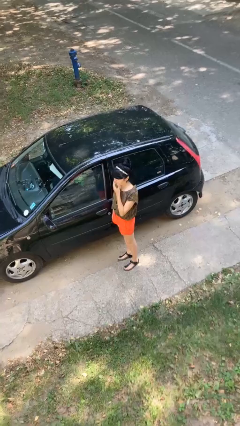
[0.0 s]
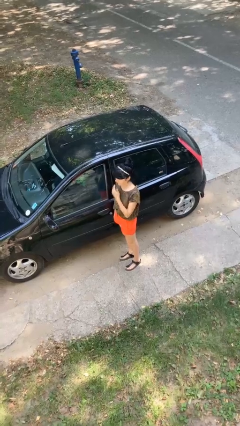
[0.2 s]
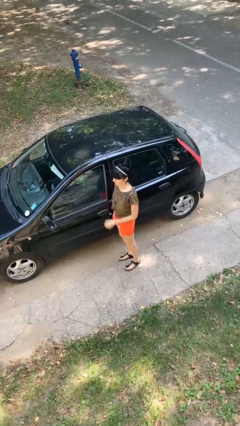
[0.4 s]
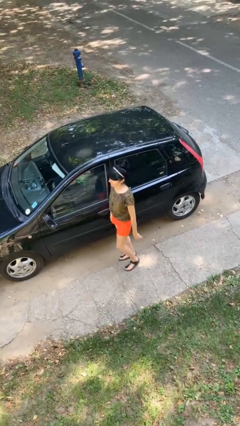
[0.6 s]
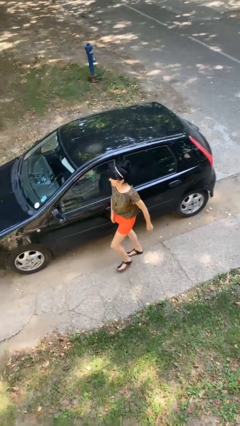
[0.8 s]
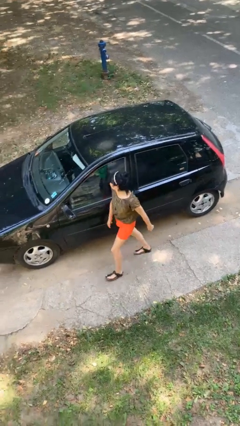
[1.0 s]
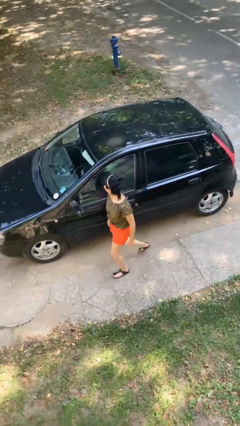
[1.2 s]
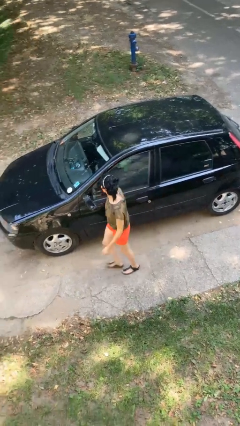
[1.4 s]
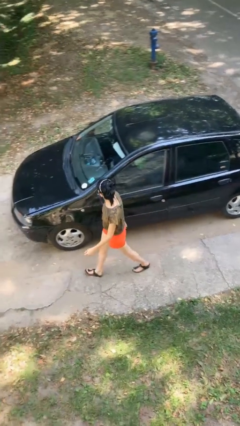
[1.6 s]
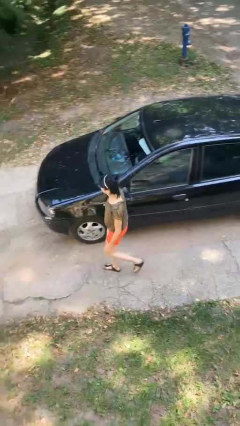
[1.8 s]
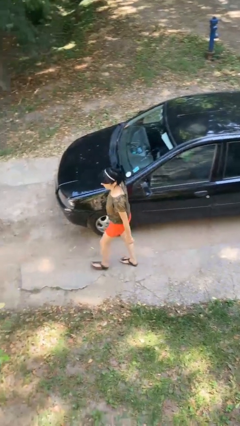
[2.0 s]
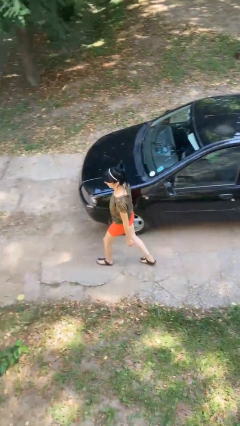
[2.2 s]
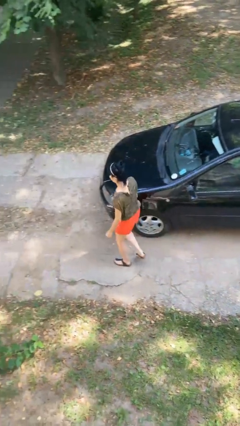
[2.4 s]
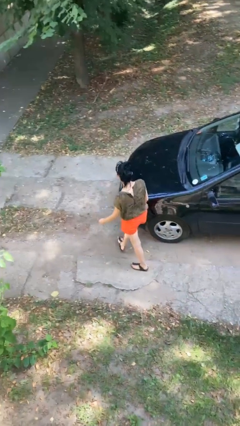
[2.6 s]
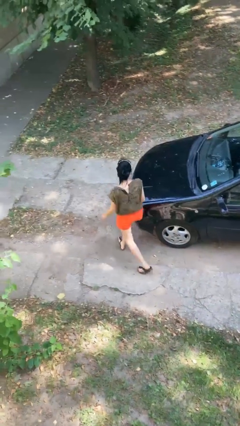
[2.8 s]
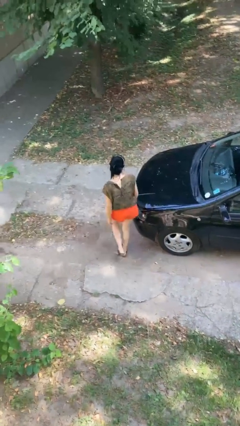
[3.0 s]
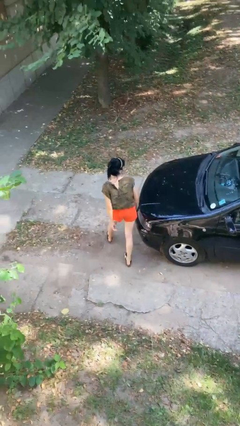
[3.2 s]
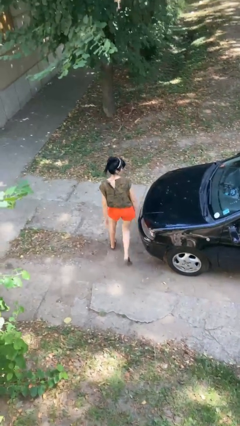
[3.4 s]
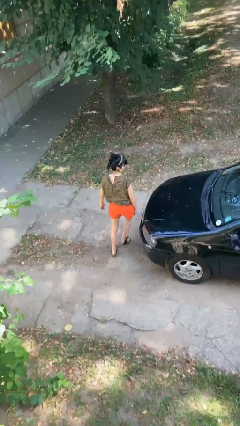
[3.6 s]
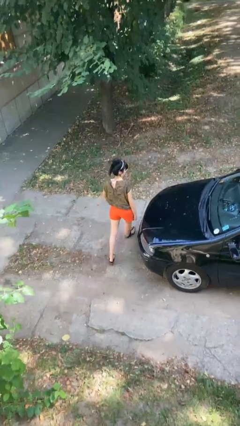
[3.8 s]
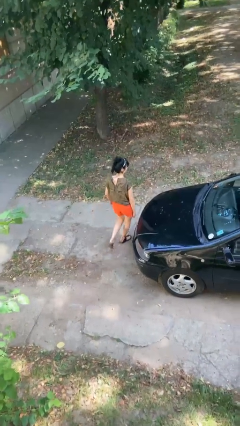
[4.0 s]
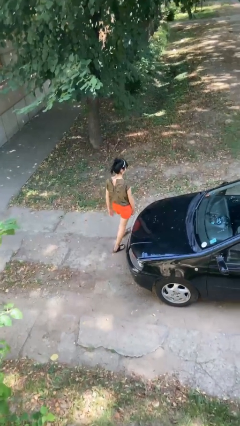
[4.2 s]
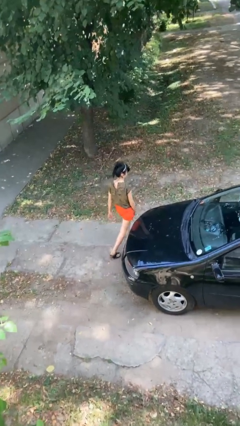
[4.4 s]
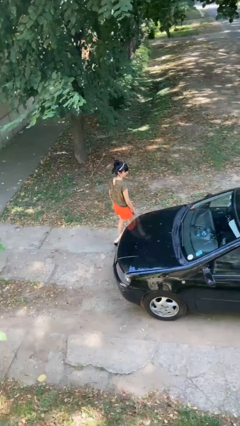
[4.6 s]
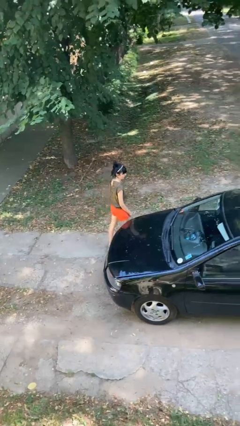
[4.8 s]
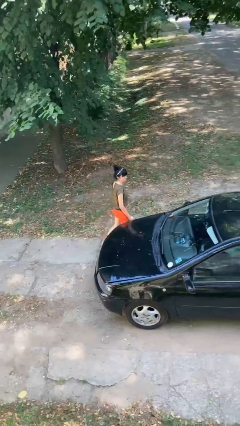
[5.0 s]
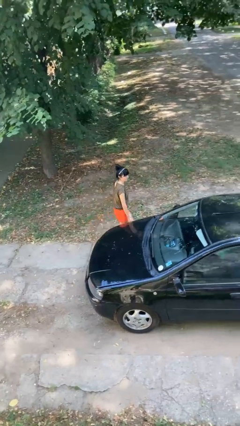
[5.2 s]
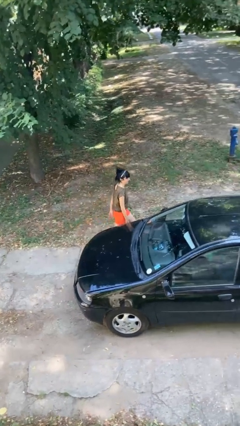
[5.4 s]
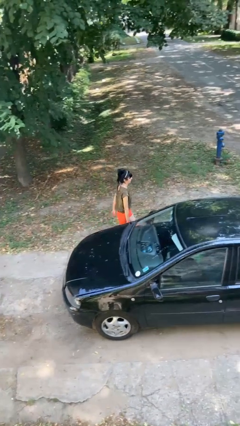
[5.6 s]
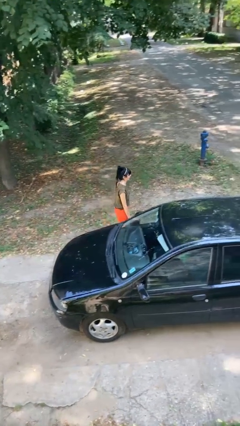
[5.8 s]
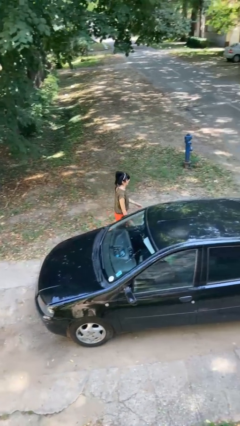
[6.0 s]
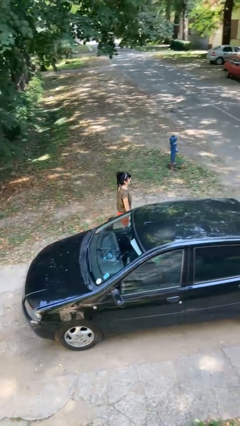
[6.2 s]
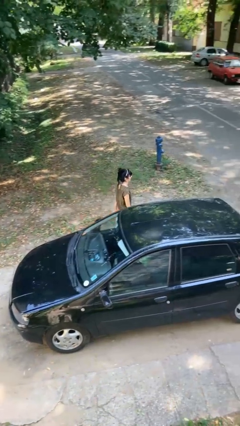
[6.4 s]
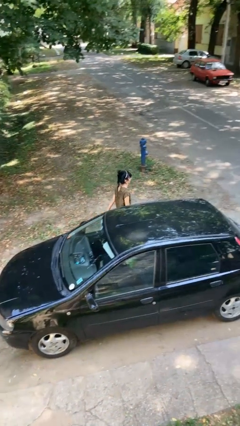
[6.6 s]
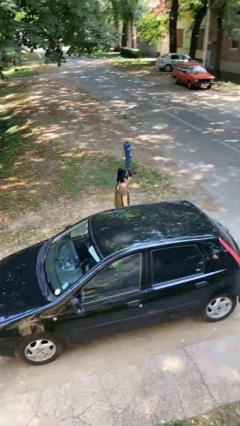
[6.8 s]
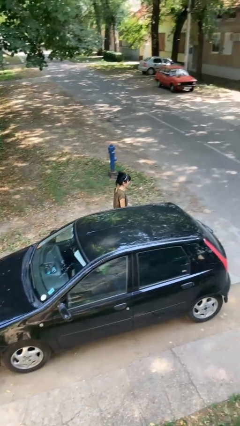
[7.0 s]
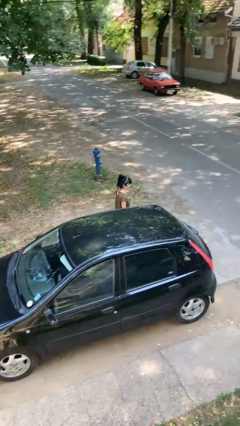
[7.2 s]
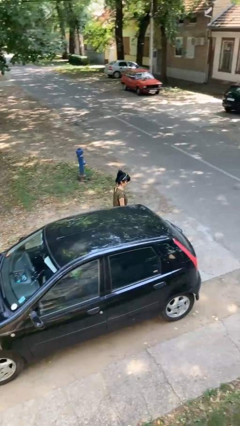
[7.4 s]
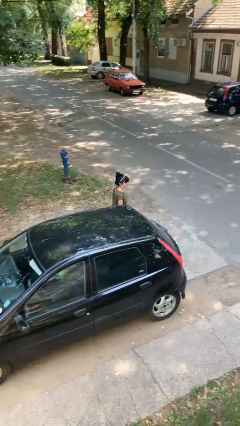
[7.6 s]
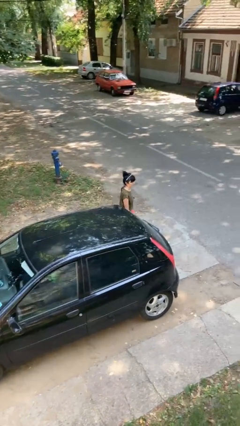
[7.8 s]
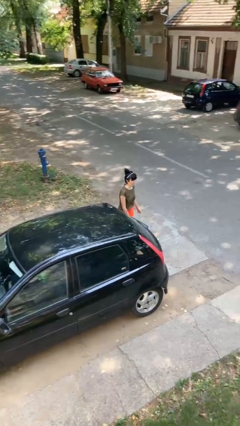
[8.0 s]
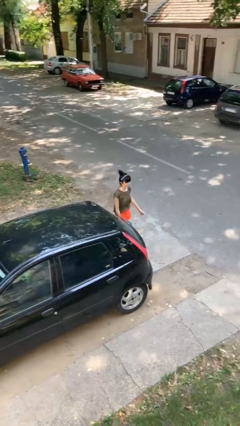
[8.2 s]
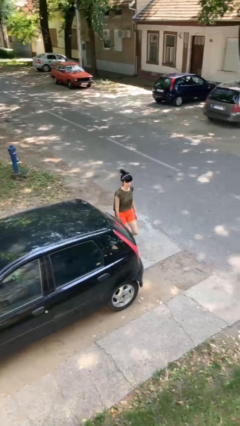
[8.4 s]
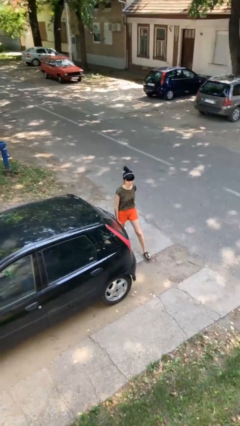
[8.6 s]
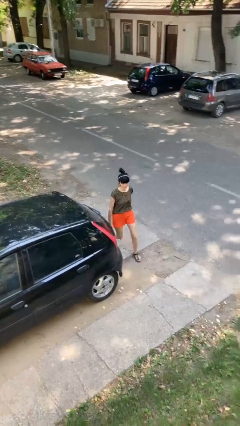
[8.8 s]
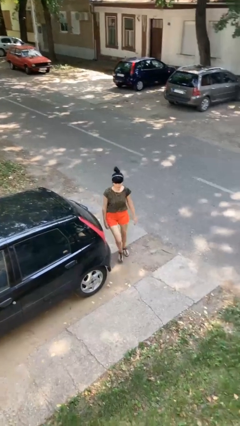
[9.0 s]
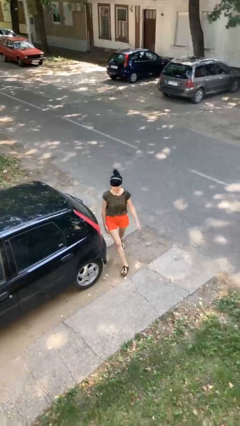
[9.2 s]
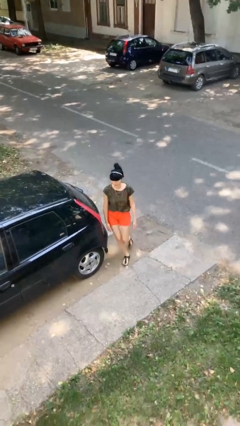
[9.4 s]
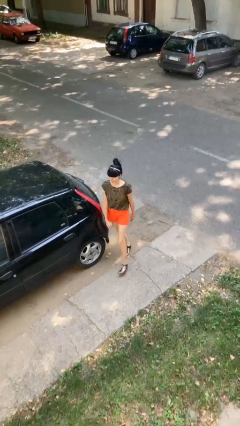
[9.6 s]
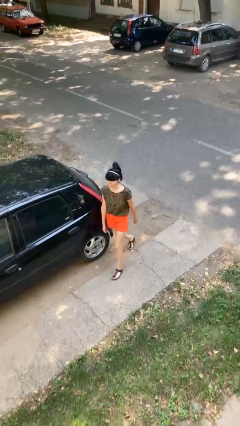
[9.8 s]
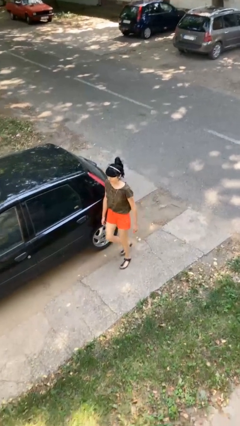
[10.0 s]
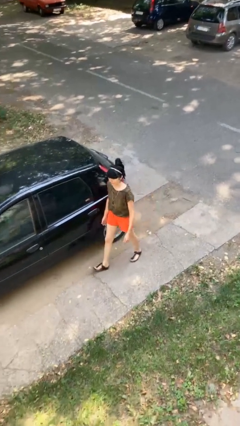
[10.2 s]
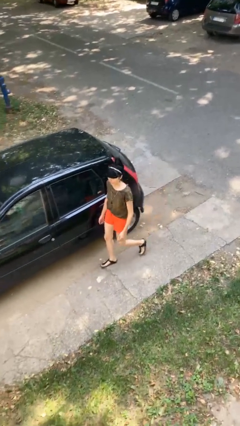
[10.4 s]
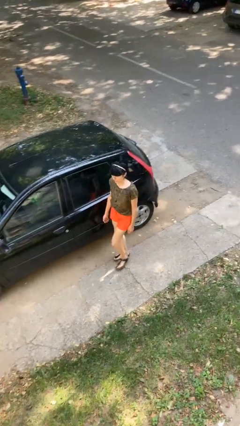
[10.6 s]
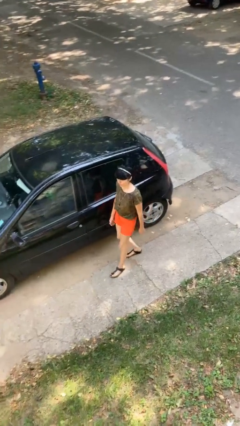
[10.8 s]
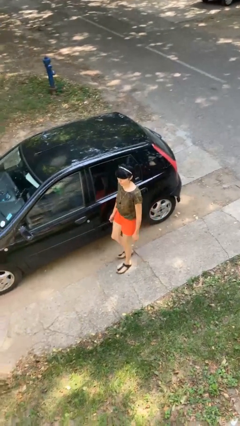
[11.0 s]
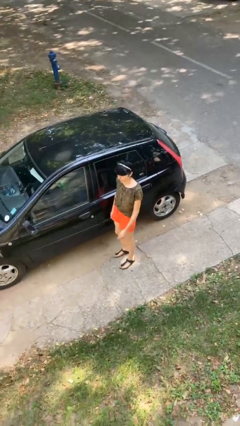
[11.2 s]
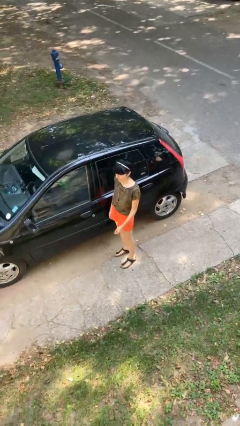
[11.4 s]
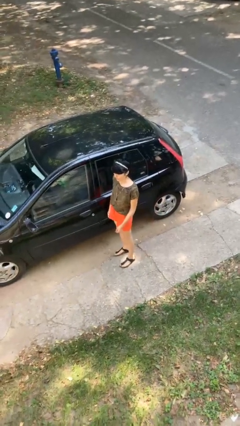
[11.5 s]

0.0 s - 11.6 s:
person walks around car

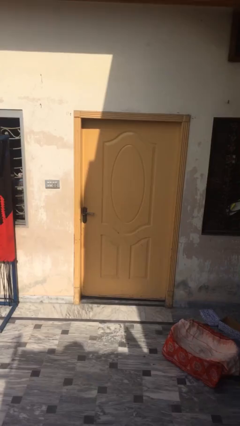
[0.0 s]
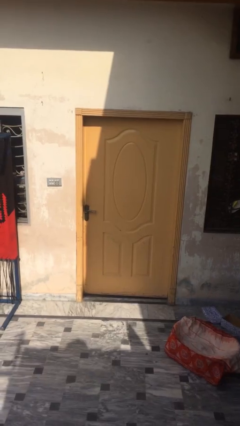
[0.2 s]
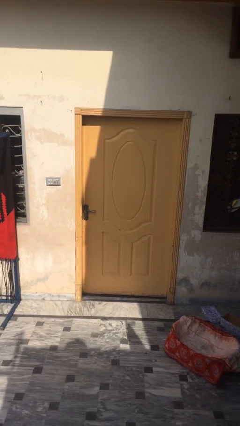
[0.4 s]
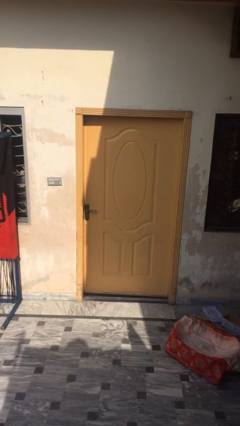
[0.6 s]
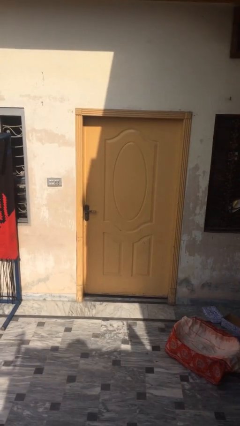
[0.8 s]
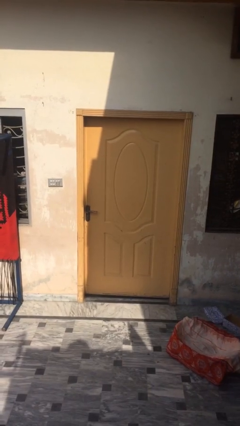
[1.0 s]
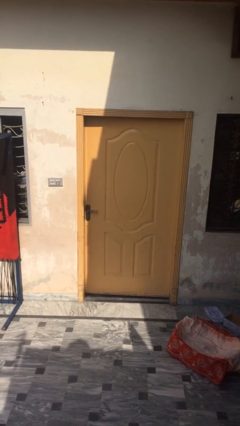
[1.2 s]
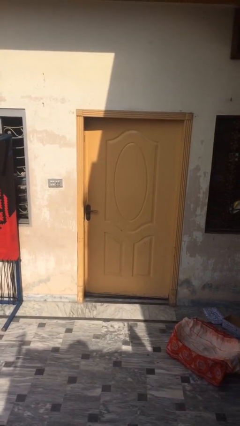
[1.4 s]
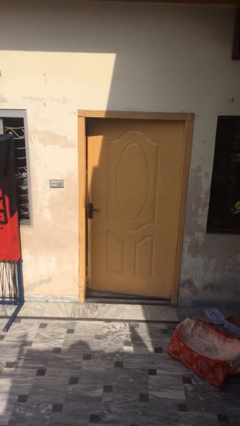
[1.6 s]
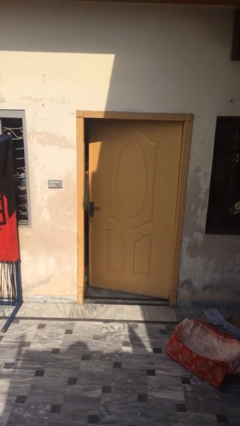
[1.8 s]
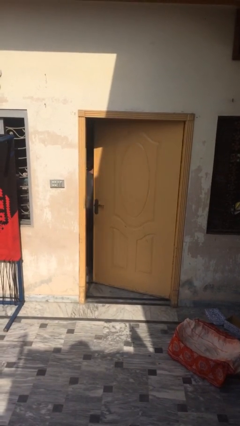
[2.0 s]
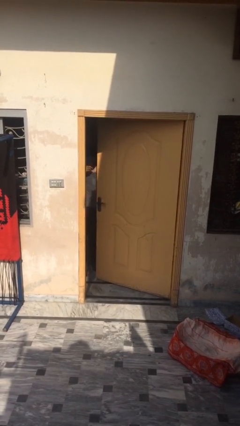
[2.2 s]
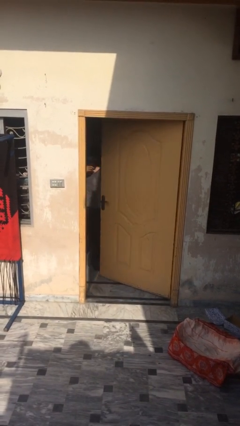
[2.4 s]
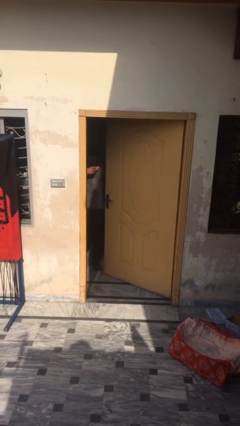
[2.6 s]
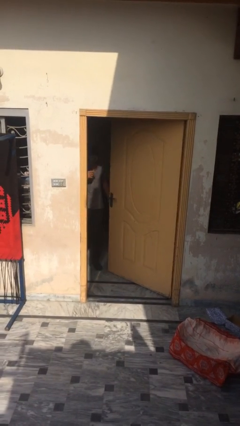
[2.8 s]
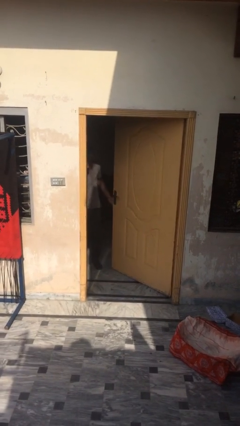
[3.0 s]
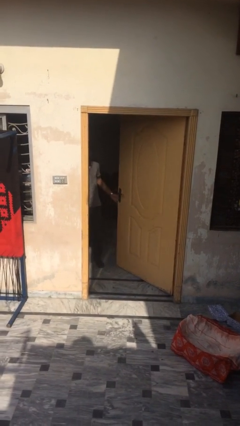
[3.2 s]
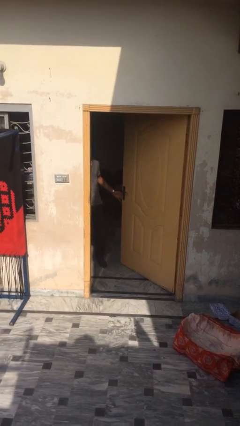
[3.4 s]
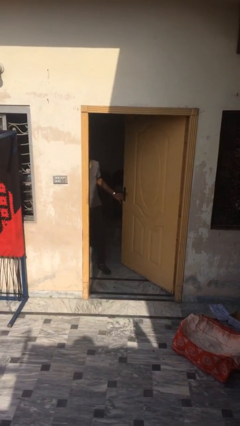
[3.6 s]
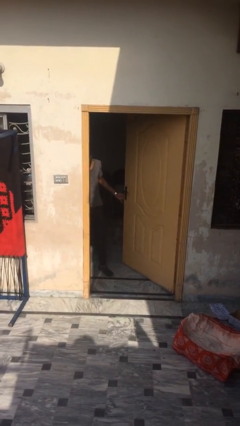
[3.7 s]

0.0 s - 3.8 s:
person opens facility door

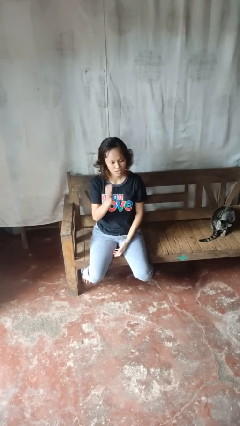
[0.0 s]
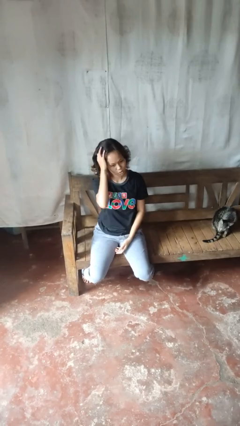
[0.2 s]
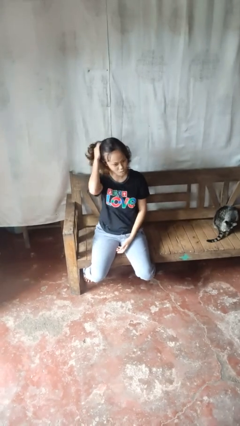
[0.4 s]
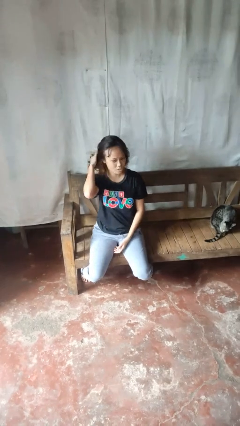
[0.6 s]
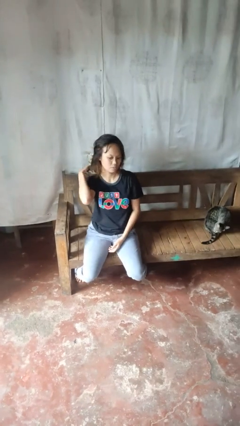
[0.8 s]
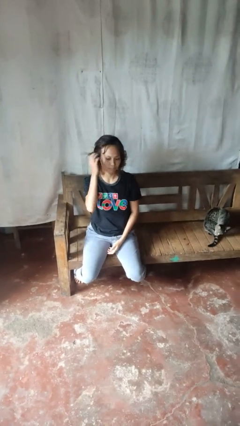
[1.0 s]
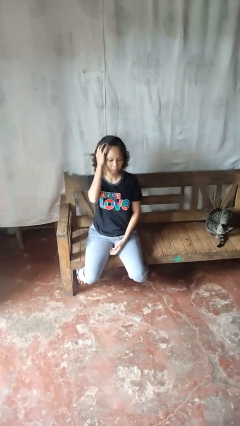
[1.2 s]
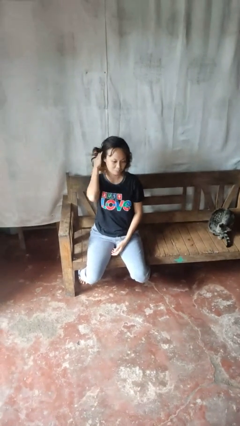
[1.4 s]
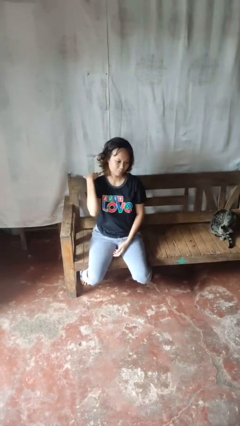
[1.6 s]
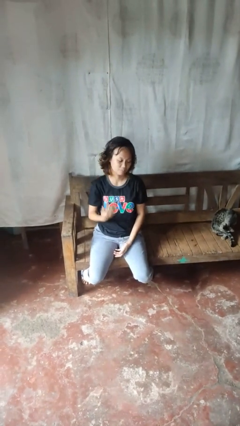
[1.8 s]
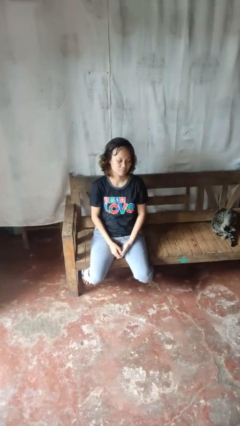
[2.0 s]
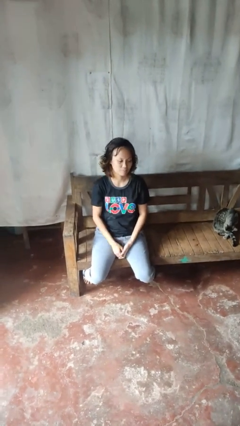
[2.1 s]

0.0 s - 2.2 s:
person strokes hair

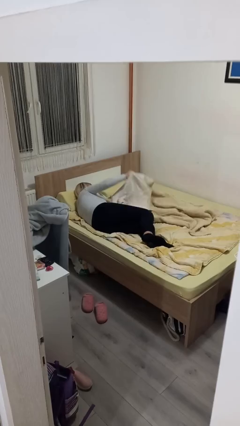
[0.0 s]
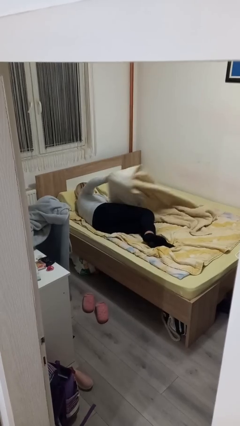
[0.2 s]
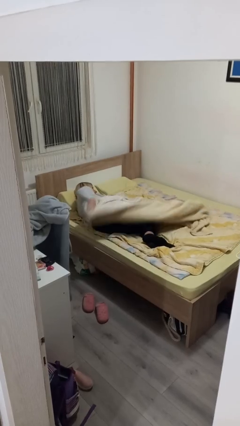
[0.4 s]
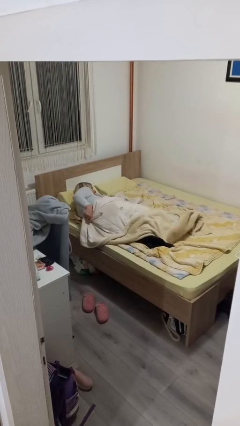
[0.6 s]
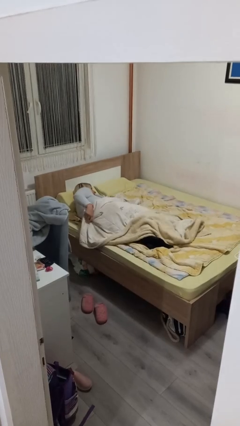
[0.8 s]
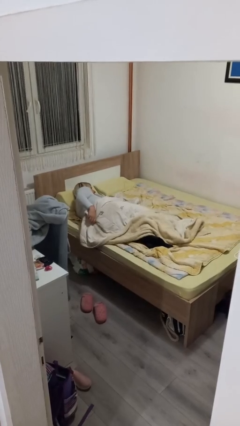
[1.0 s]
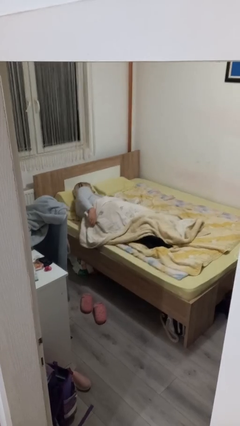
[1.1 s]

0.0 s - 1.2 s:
person covers with bedsheets
